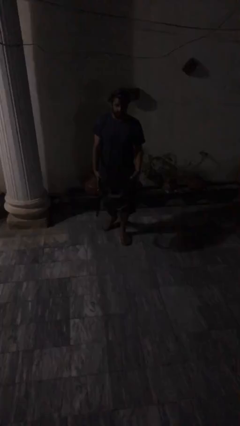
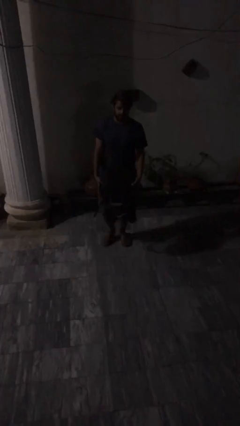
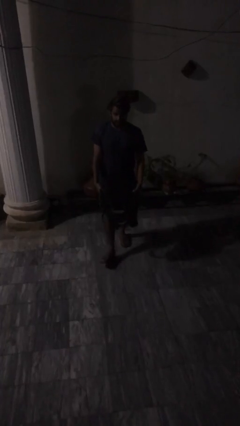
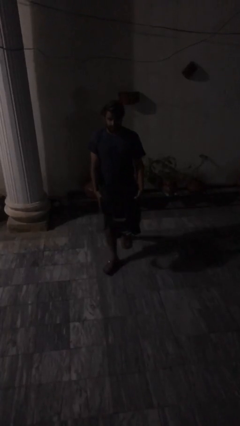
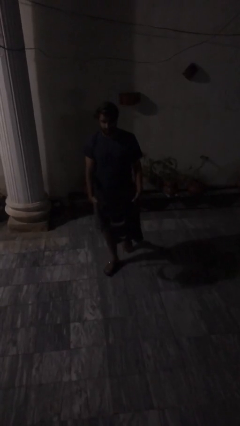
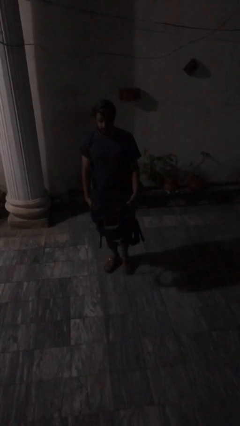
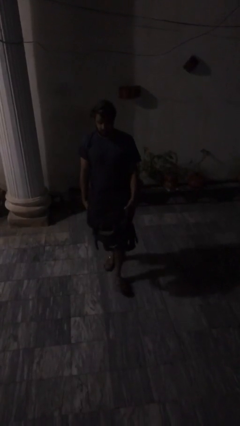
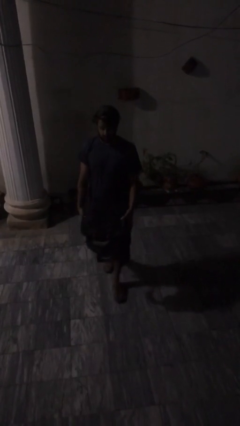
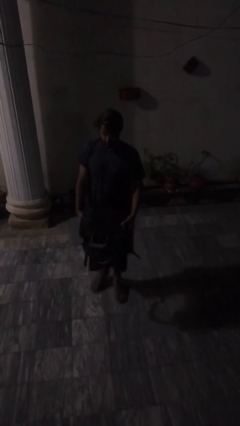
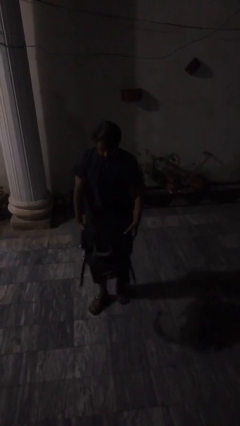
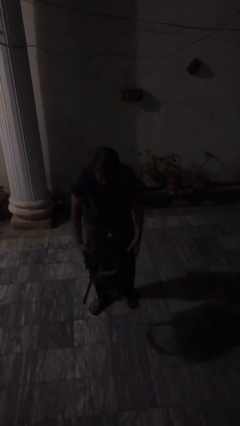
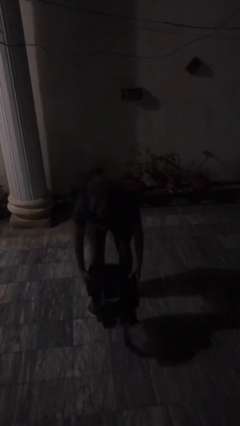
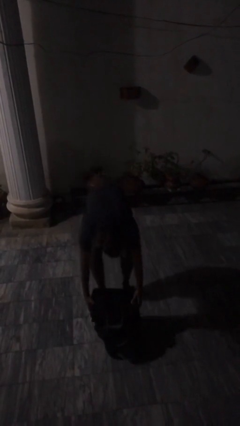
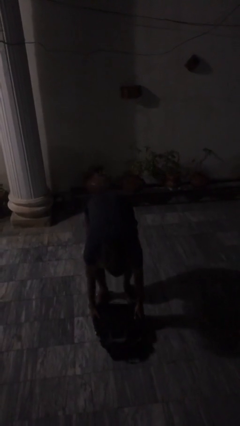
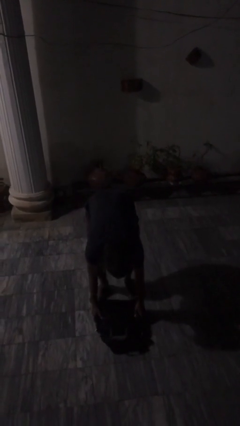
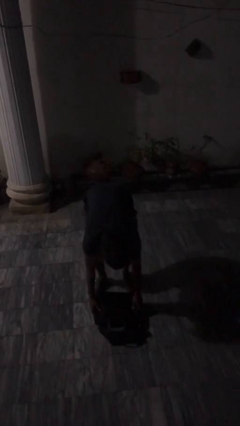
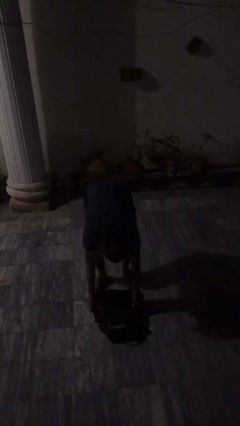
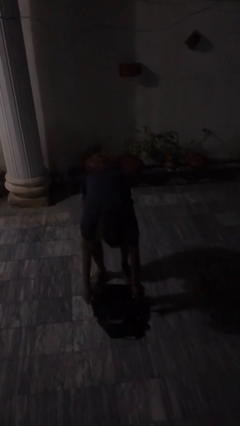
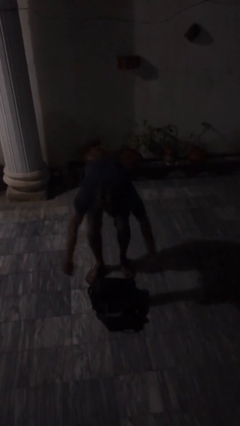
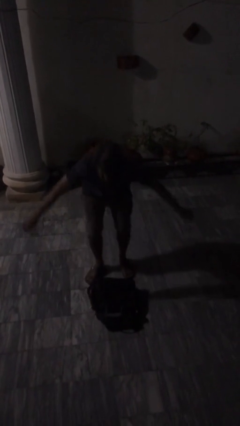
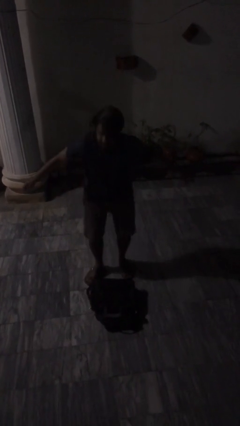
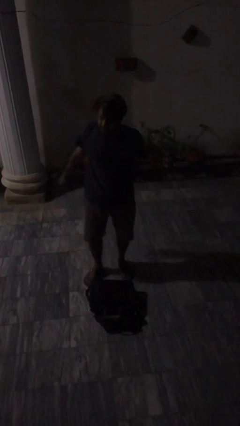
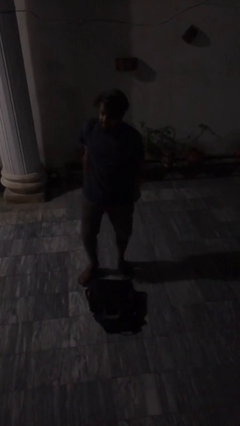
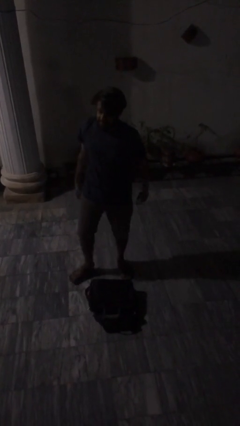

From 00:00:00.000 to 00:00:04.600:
person puts down object on floor

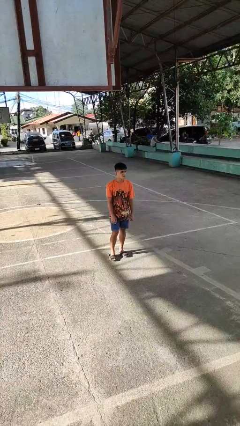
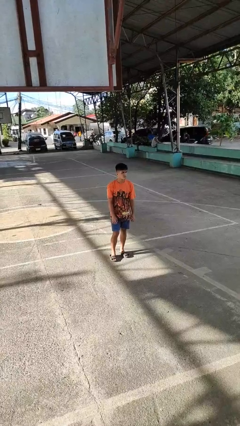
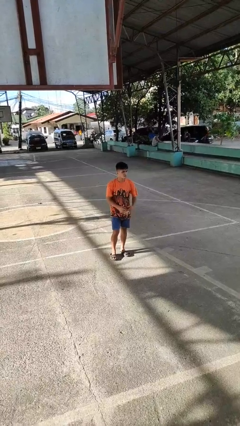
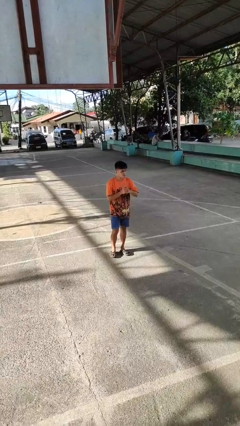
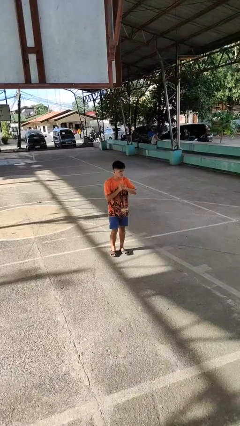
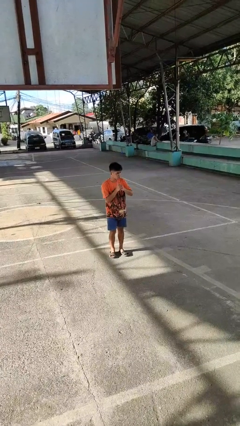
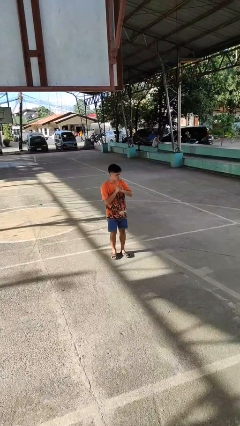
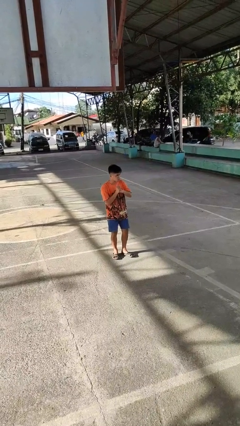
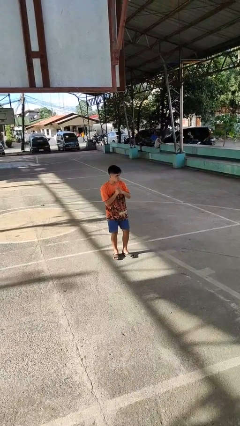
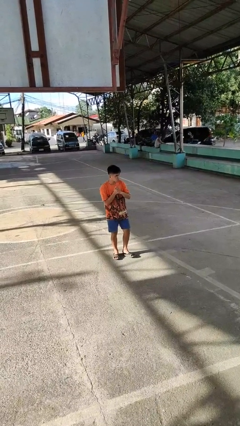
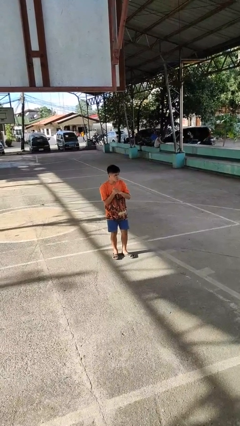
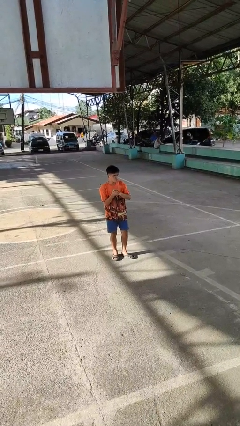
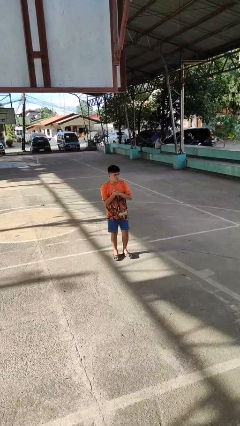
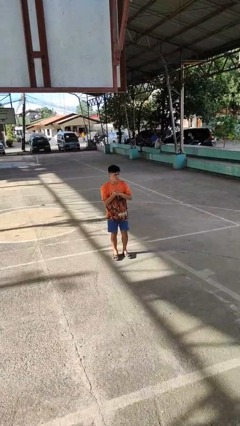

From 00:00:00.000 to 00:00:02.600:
person cracks knuckles

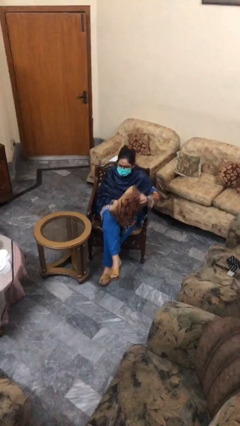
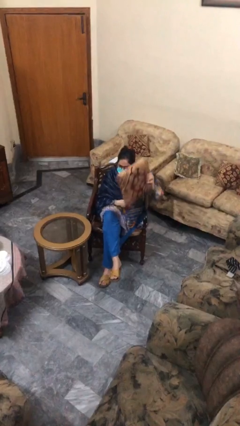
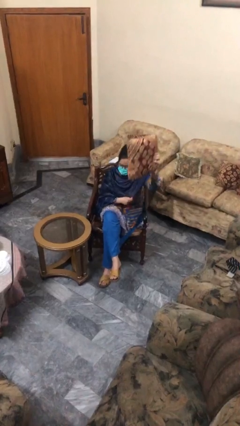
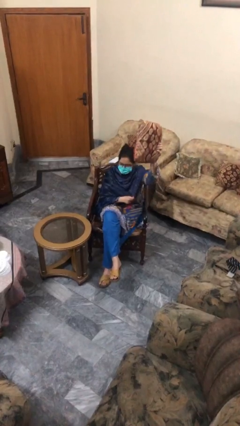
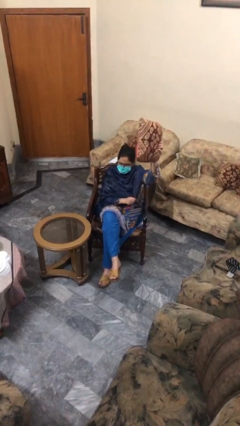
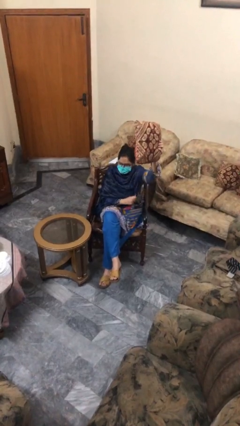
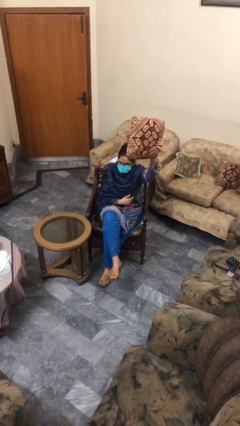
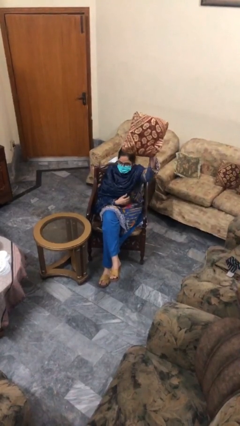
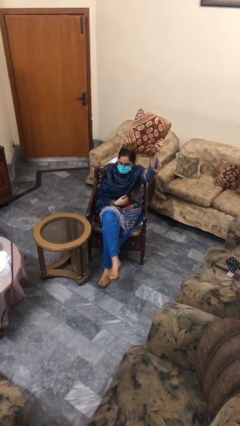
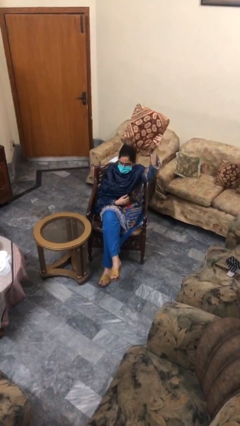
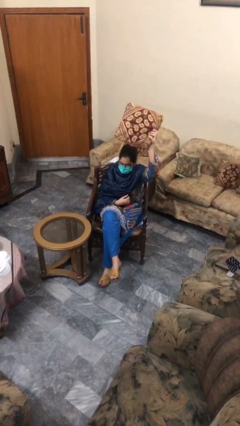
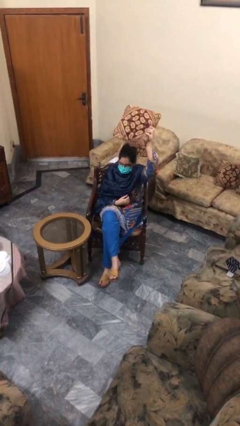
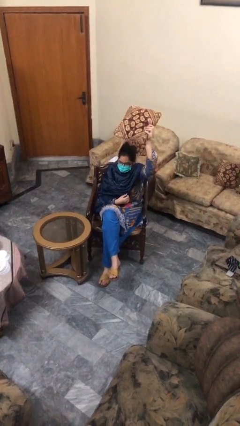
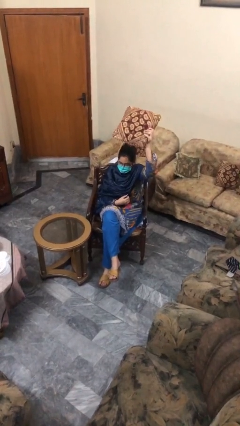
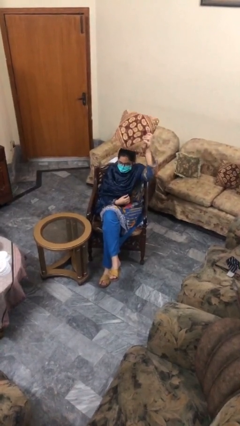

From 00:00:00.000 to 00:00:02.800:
person holds object above head

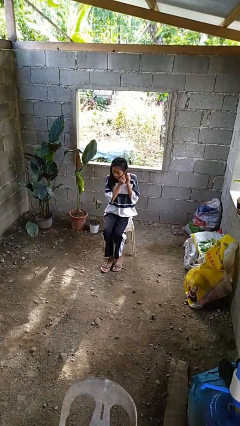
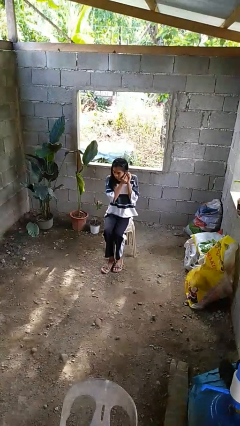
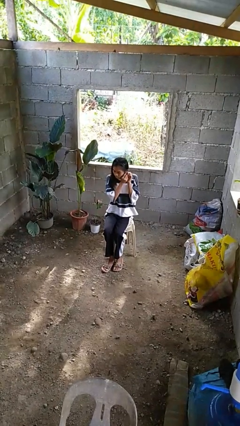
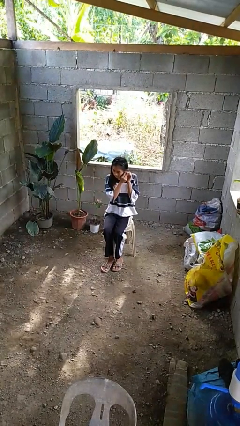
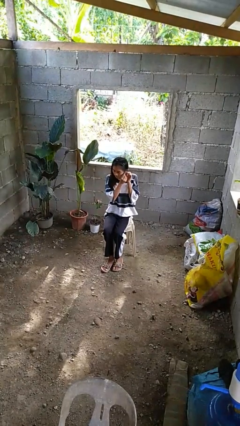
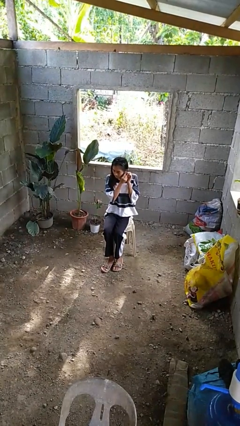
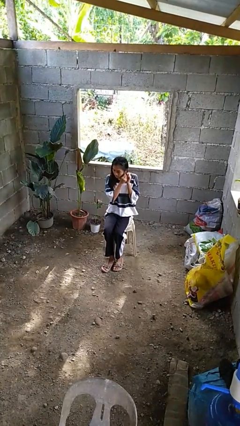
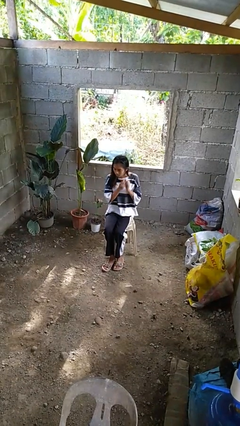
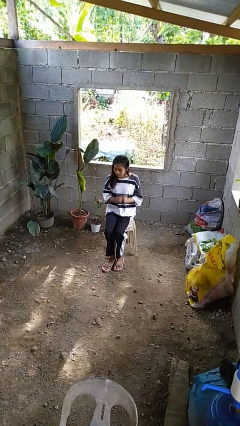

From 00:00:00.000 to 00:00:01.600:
person takes off earrings

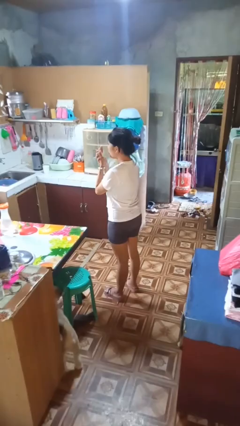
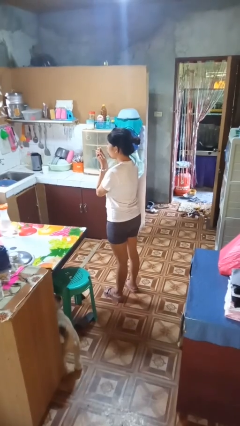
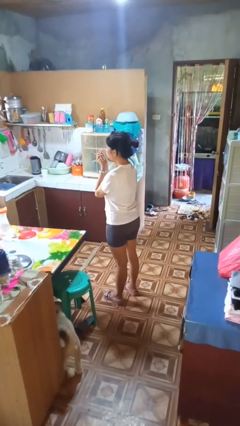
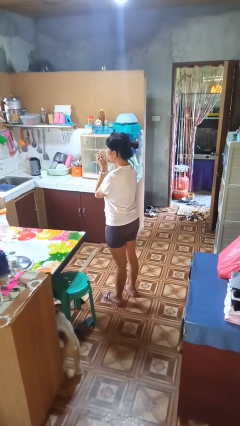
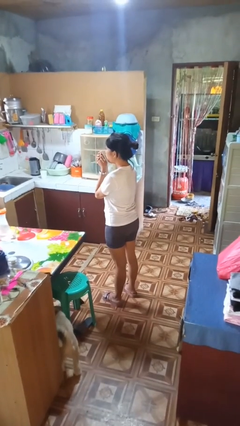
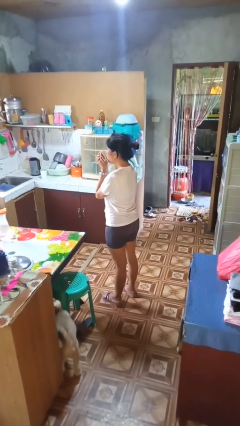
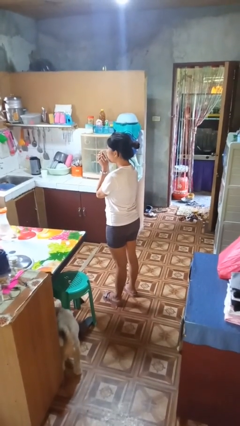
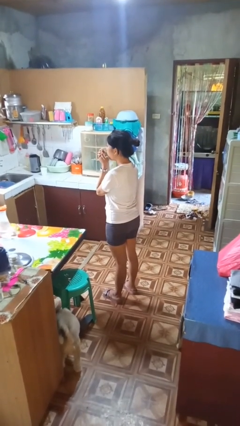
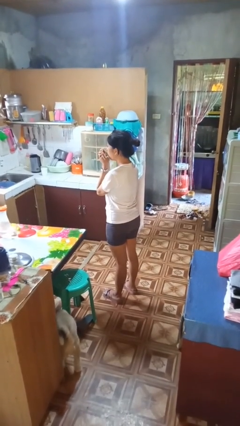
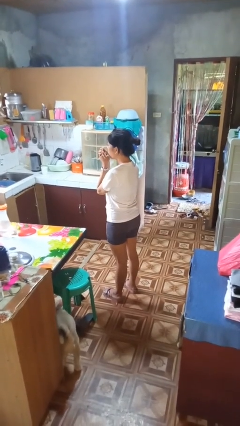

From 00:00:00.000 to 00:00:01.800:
person blows into hands

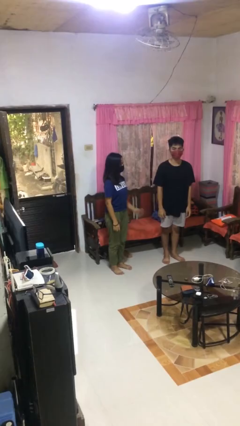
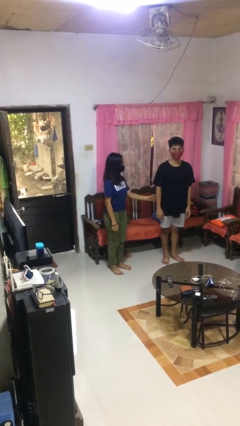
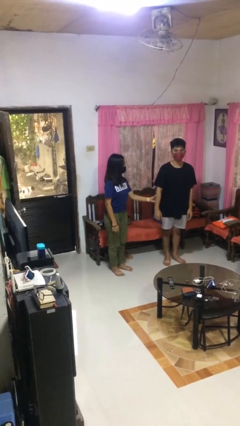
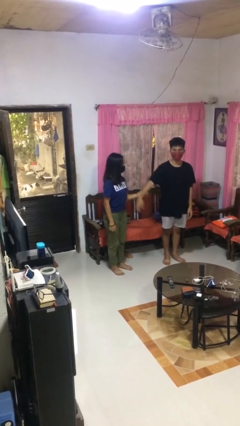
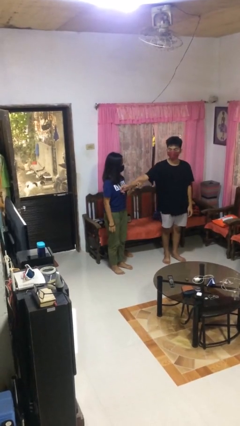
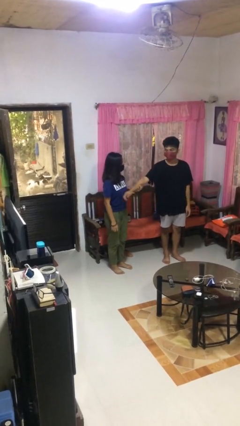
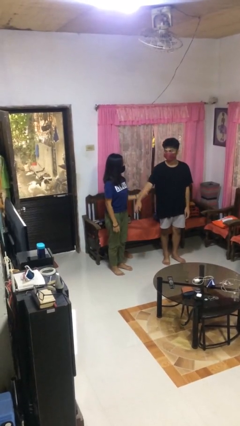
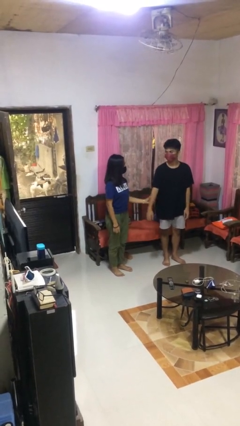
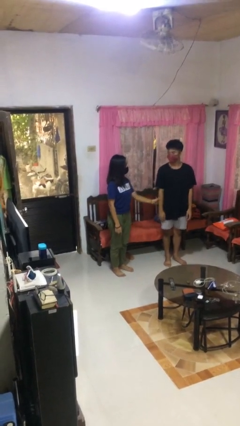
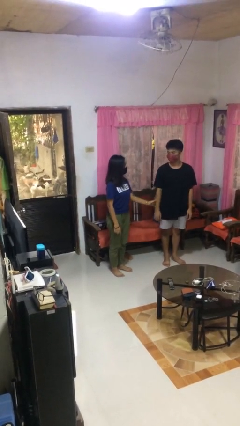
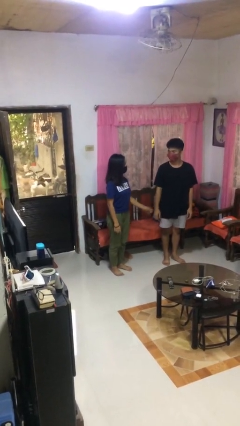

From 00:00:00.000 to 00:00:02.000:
person grabs person by forearm

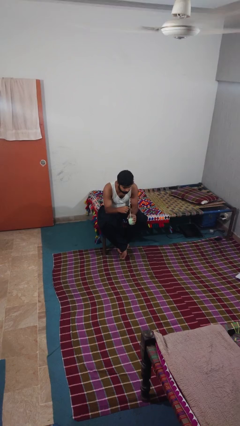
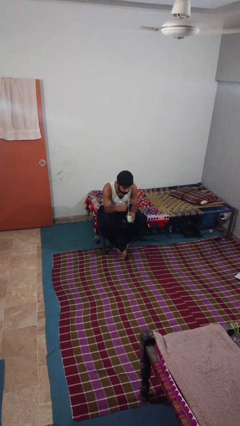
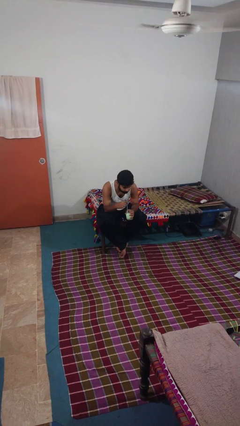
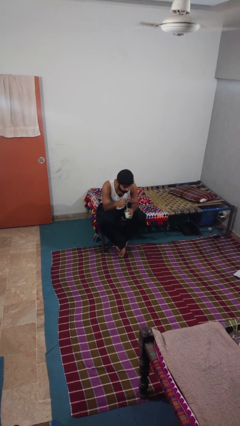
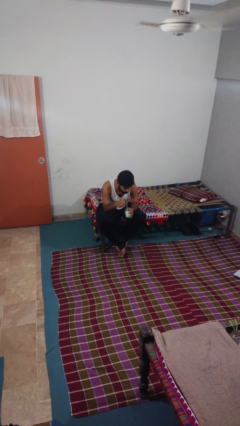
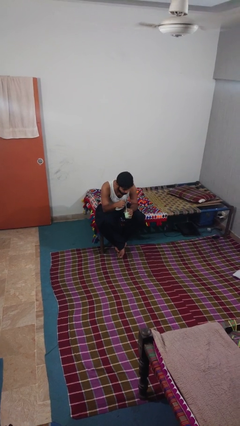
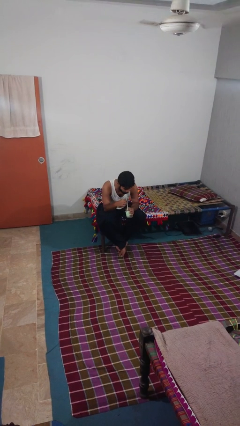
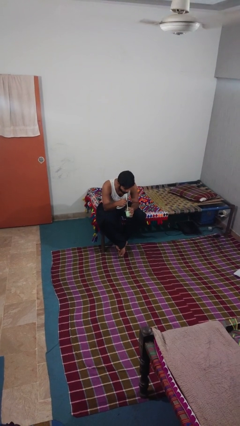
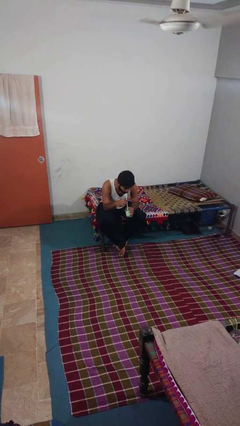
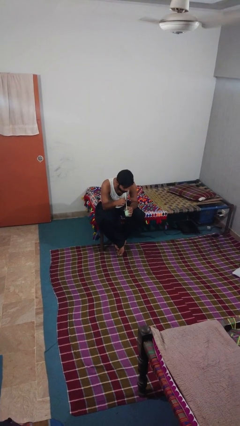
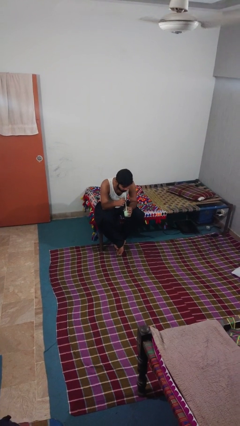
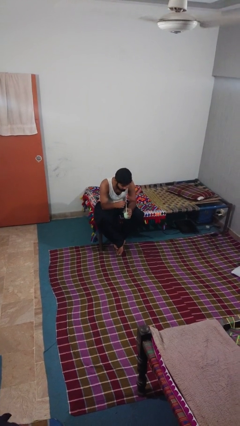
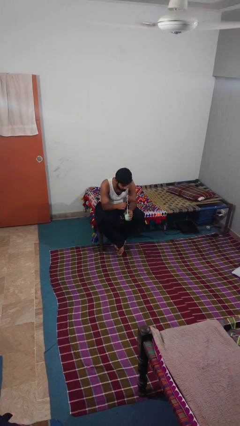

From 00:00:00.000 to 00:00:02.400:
person drinks from straw
